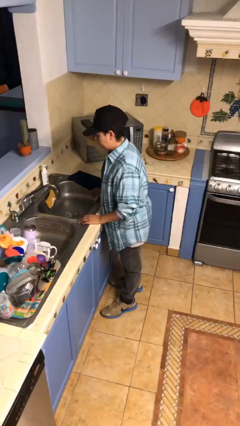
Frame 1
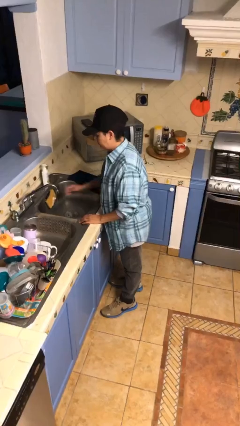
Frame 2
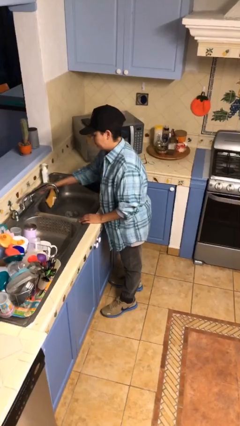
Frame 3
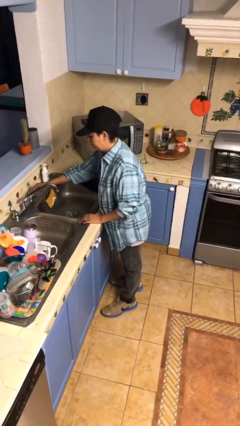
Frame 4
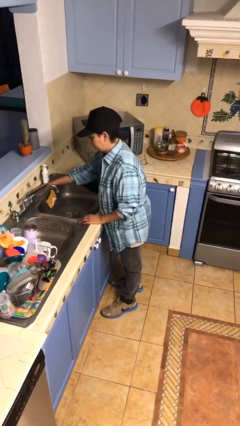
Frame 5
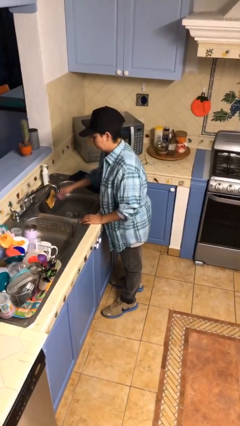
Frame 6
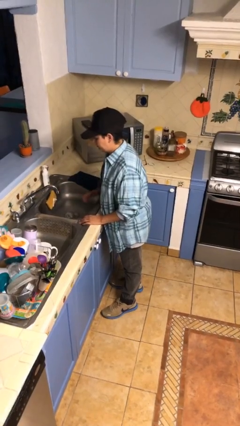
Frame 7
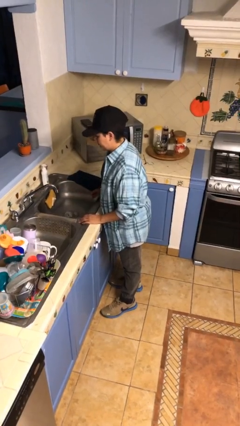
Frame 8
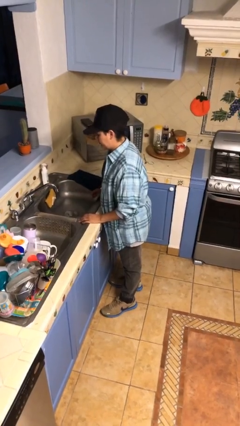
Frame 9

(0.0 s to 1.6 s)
person turns off faucet

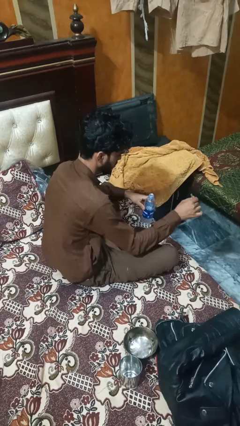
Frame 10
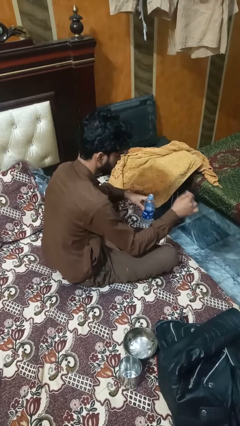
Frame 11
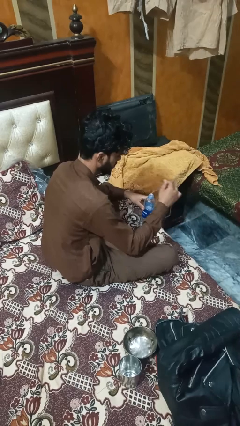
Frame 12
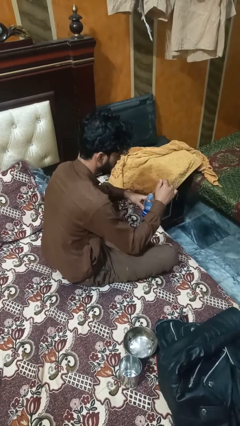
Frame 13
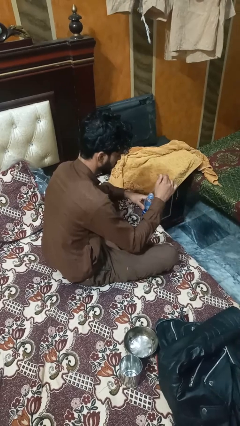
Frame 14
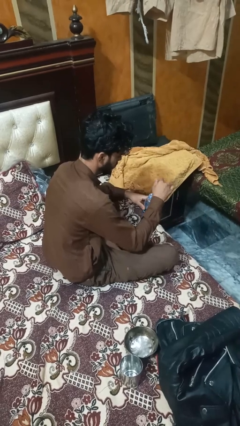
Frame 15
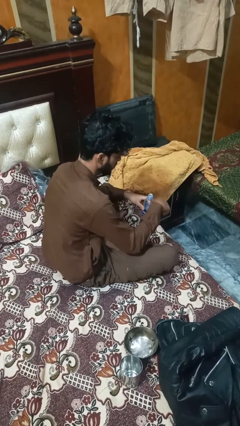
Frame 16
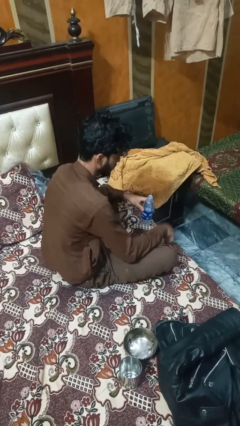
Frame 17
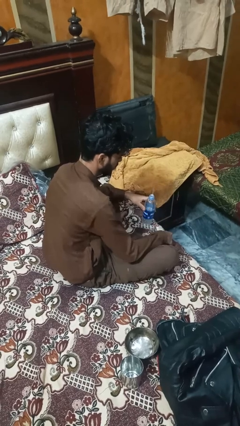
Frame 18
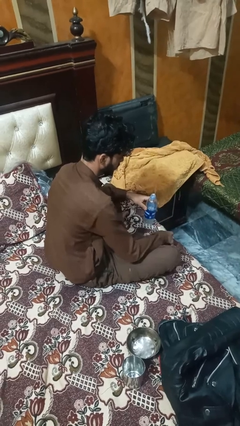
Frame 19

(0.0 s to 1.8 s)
person screws lid to bottle

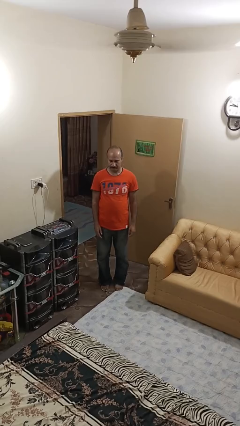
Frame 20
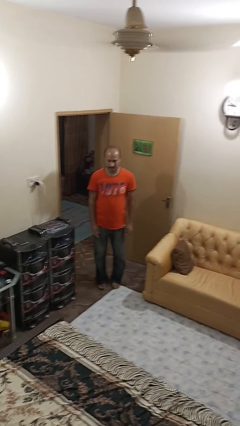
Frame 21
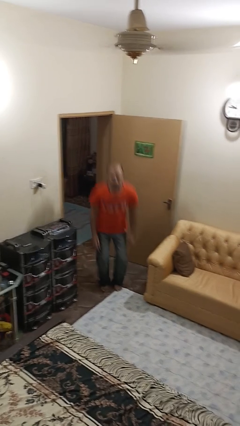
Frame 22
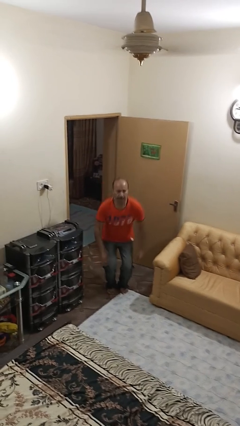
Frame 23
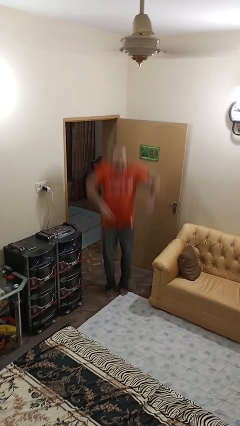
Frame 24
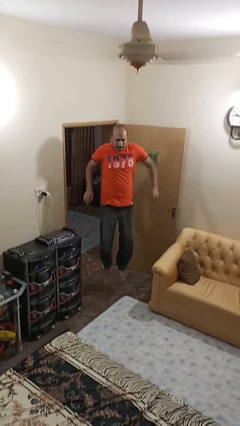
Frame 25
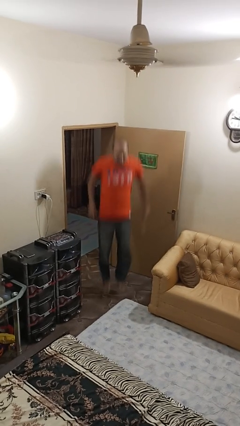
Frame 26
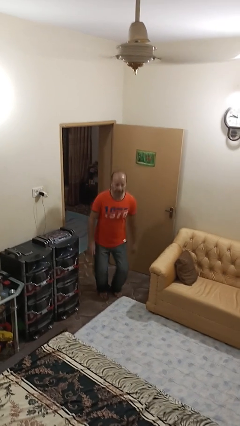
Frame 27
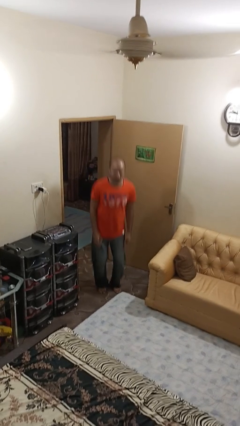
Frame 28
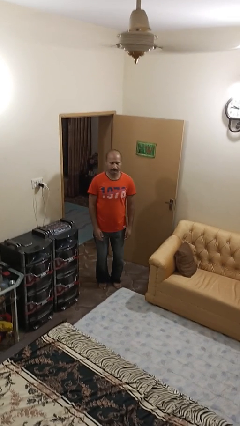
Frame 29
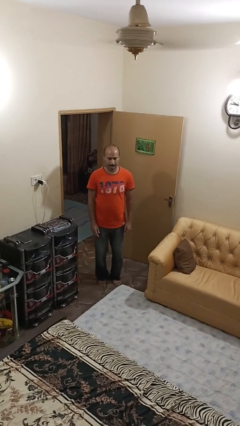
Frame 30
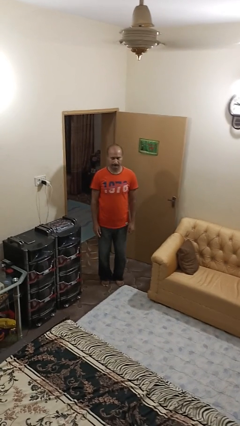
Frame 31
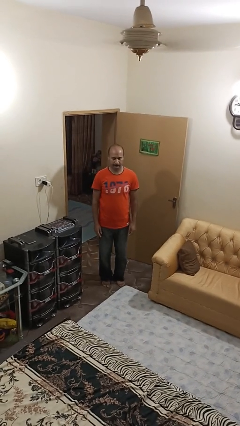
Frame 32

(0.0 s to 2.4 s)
person jumps

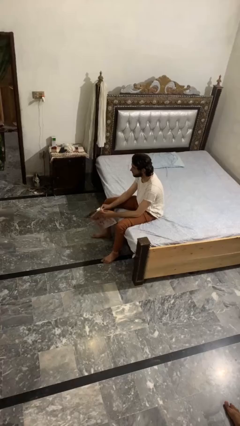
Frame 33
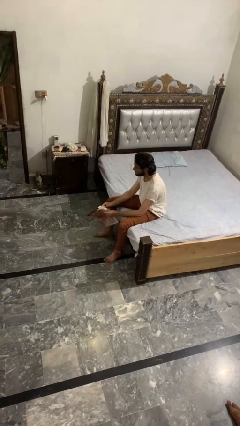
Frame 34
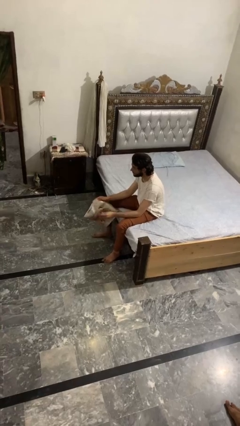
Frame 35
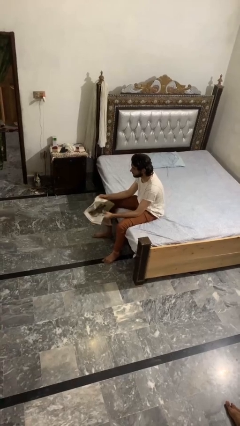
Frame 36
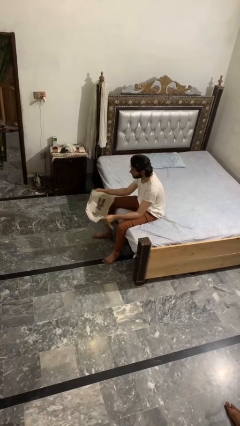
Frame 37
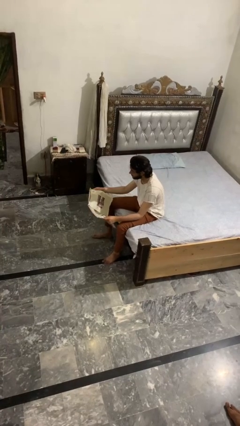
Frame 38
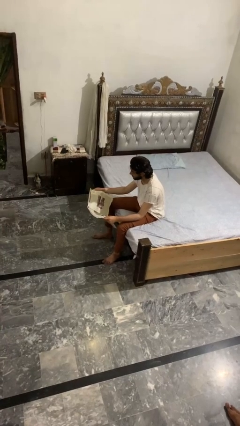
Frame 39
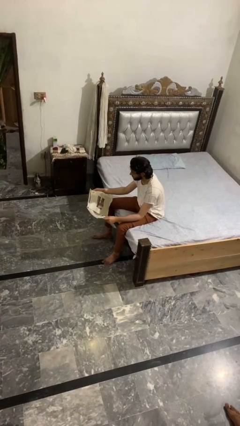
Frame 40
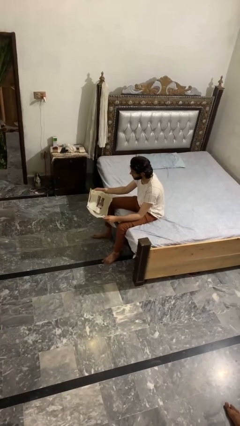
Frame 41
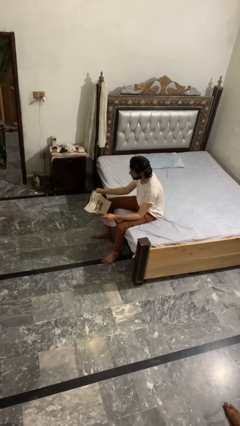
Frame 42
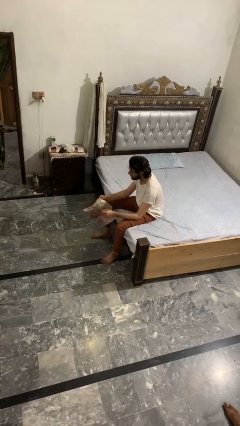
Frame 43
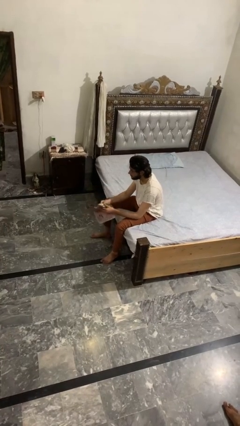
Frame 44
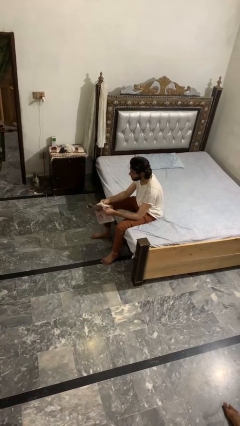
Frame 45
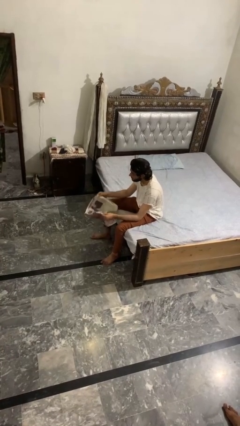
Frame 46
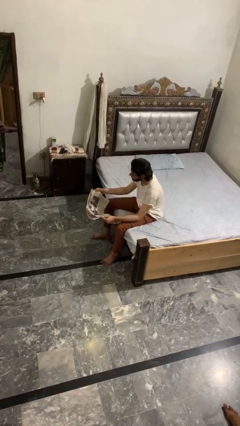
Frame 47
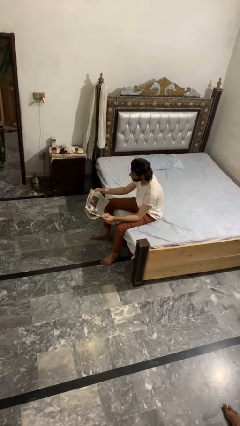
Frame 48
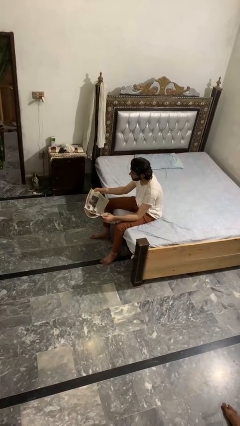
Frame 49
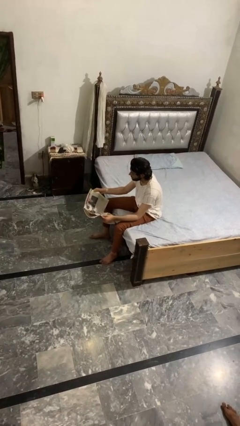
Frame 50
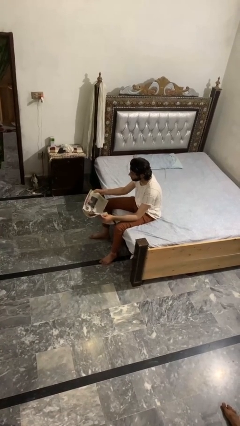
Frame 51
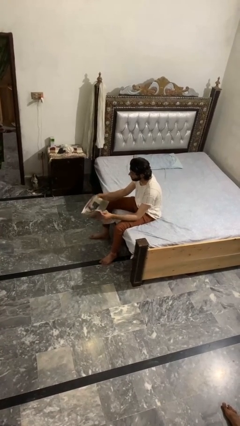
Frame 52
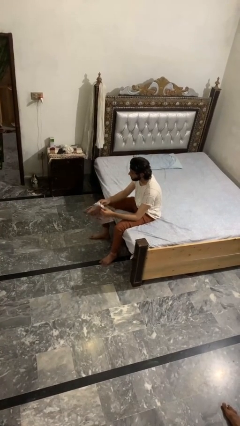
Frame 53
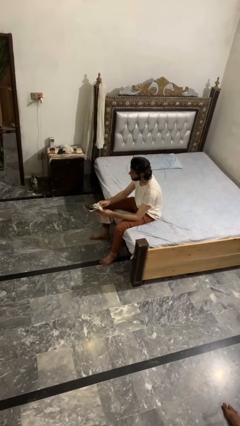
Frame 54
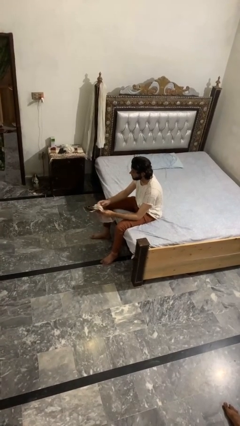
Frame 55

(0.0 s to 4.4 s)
person reads magazine

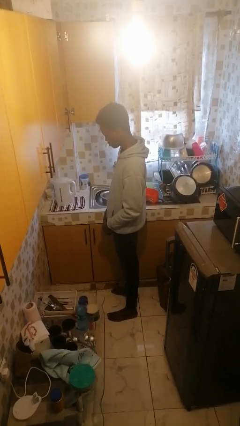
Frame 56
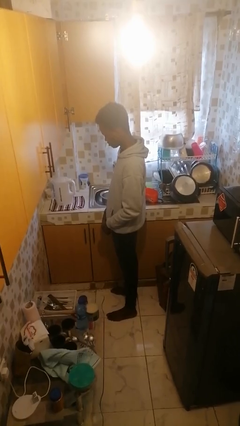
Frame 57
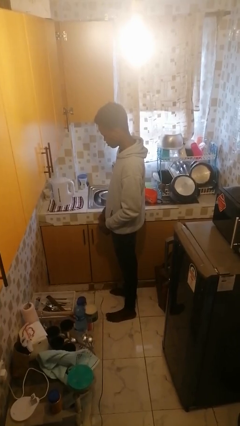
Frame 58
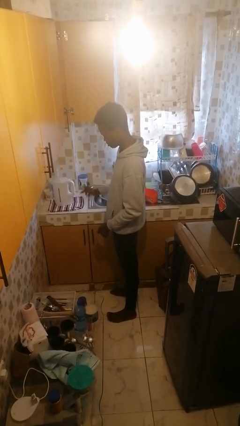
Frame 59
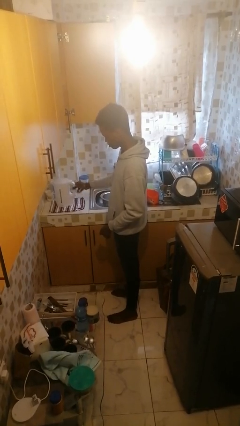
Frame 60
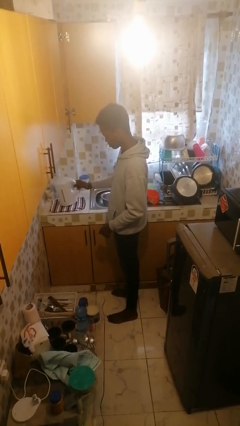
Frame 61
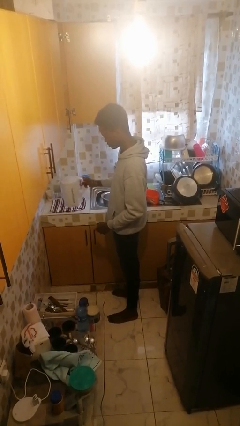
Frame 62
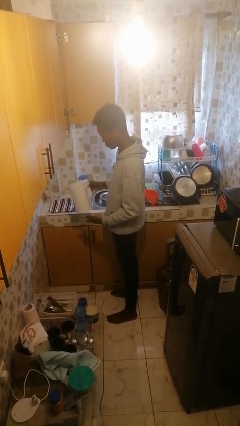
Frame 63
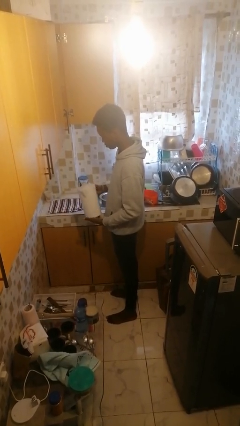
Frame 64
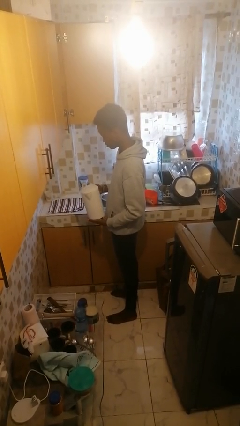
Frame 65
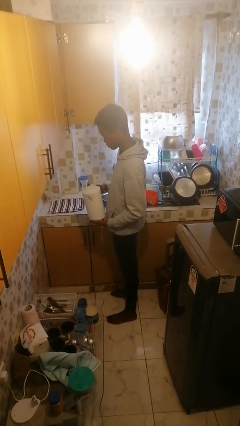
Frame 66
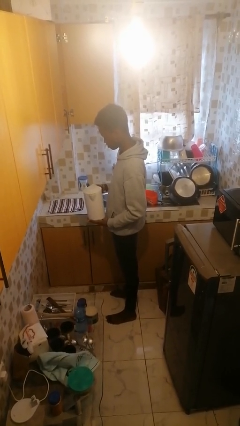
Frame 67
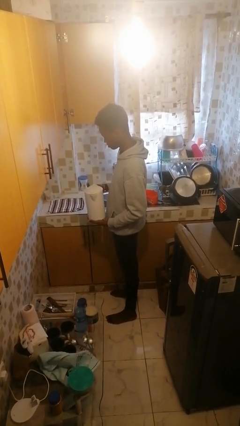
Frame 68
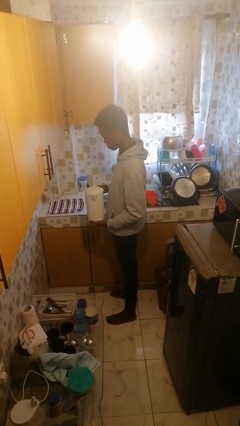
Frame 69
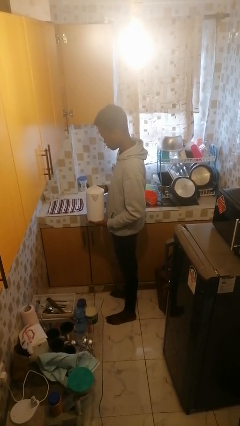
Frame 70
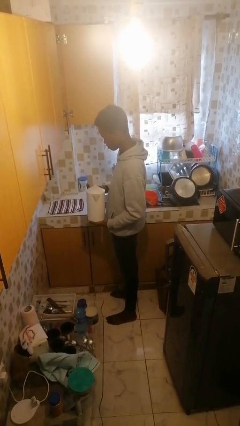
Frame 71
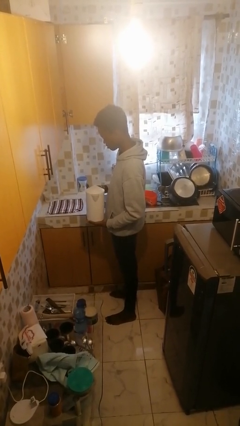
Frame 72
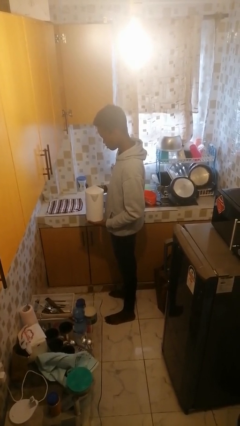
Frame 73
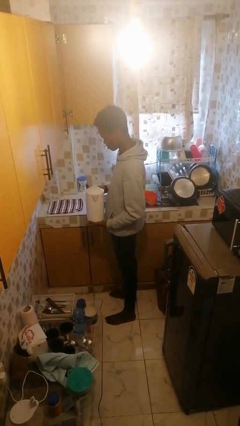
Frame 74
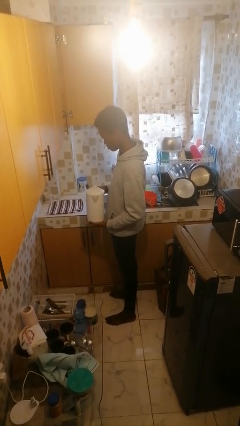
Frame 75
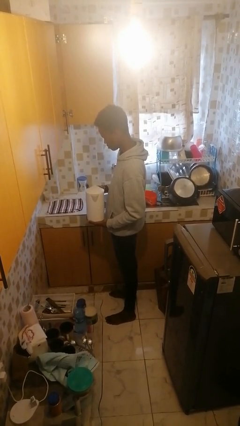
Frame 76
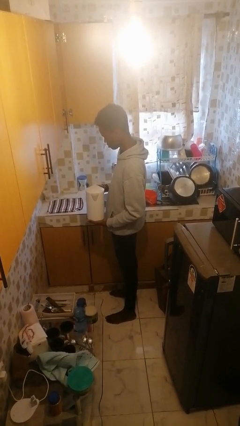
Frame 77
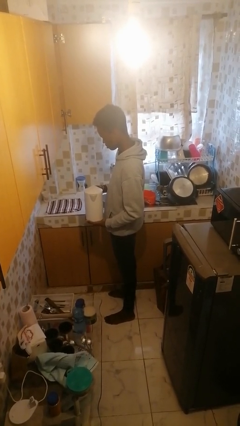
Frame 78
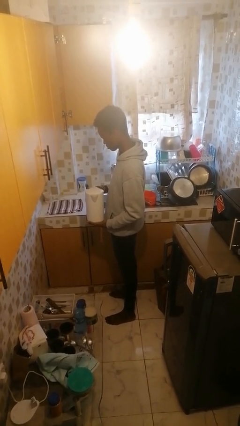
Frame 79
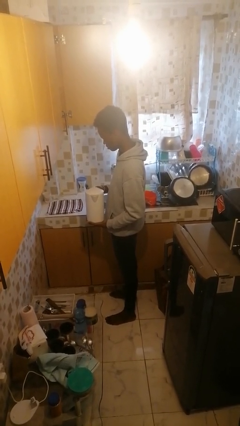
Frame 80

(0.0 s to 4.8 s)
person picks up object from countertop

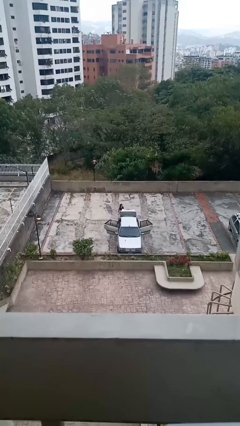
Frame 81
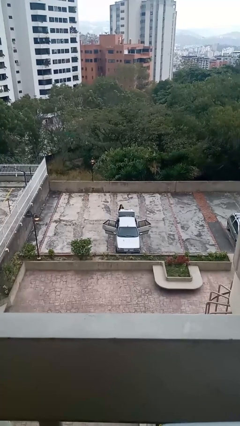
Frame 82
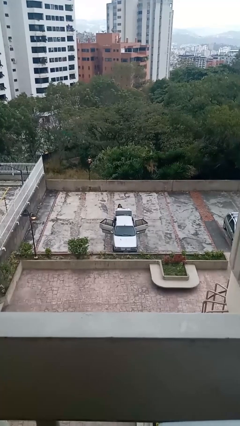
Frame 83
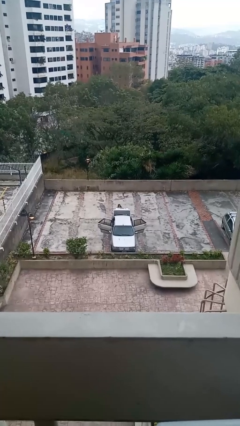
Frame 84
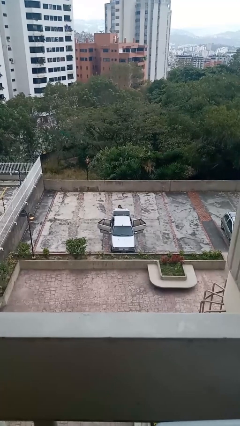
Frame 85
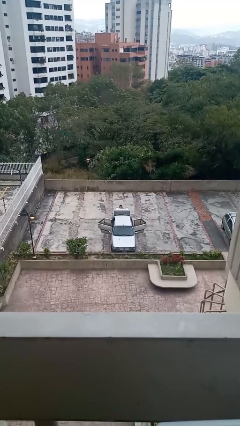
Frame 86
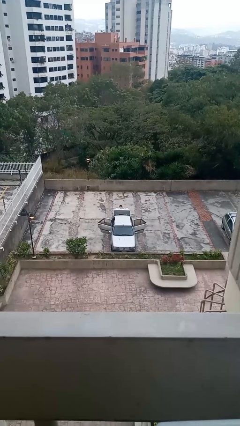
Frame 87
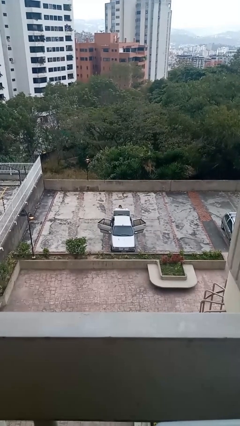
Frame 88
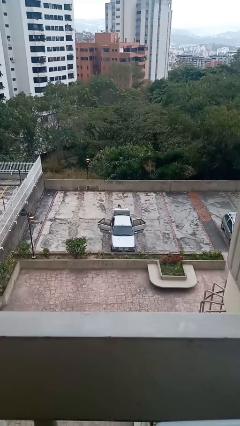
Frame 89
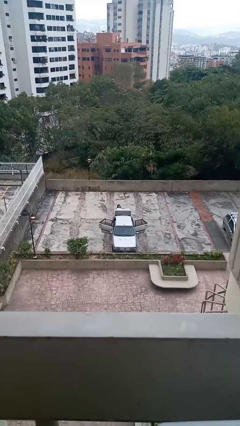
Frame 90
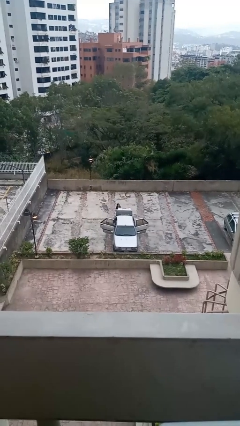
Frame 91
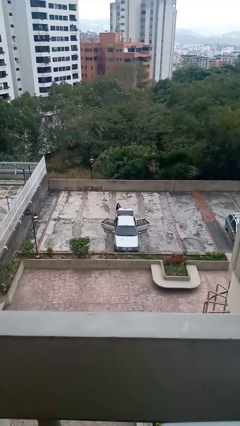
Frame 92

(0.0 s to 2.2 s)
person loads car
